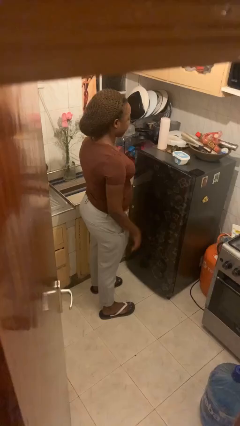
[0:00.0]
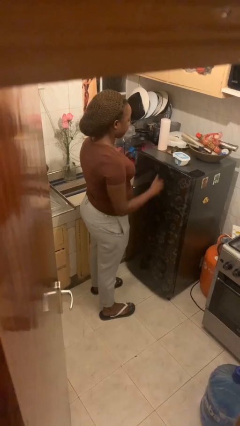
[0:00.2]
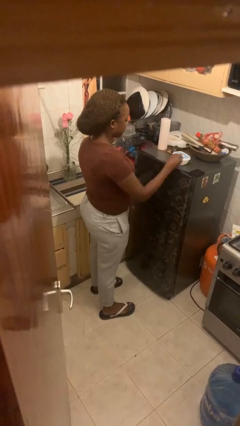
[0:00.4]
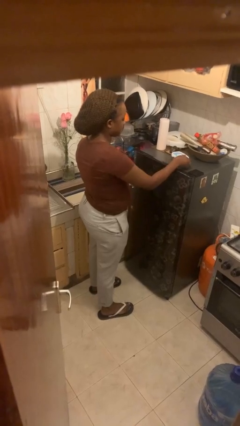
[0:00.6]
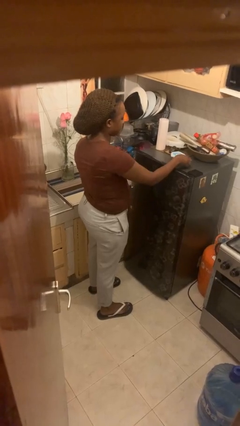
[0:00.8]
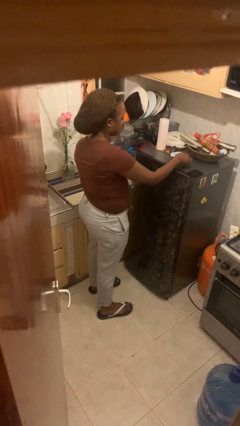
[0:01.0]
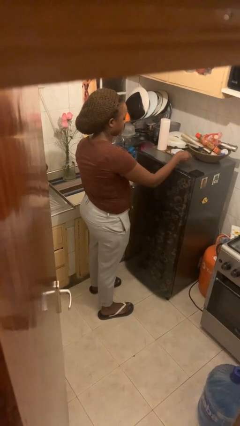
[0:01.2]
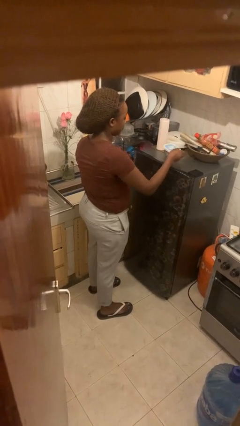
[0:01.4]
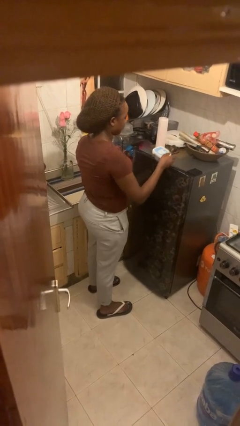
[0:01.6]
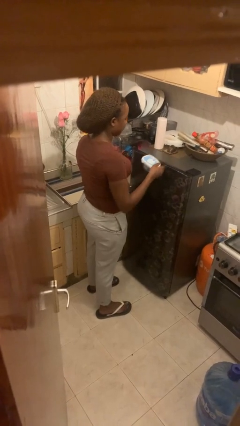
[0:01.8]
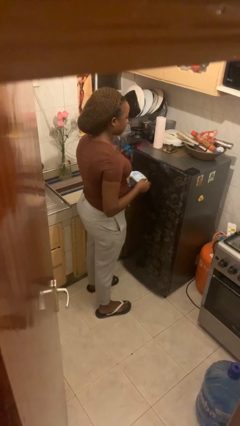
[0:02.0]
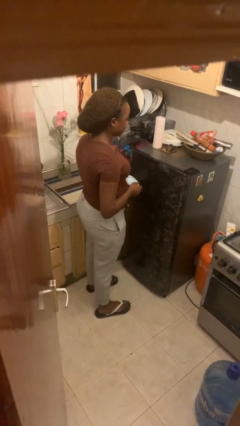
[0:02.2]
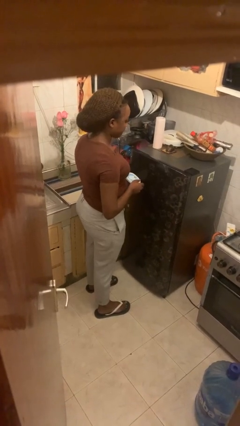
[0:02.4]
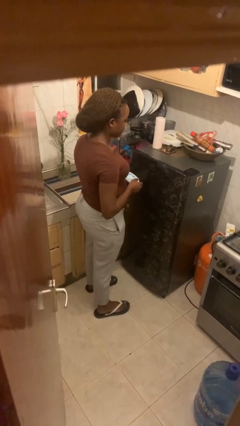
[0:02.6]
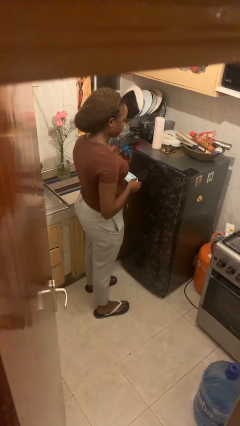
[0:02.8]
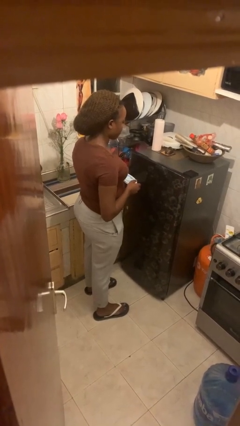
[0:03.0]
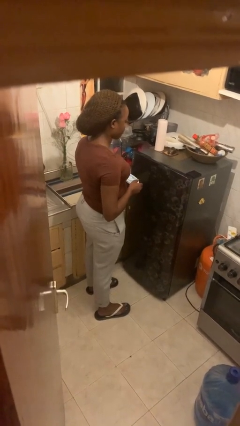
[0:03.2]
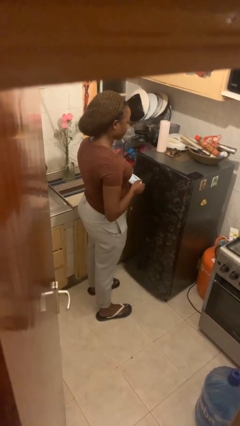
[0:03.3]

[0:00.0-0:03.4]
person picks up object from countertop

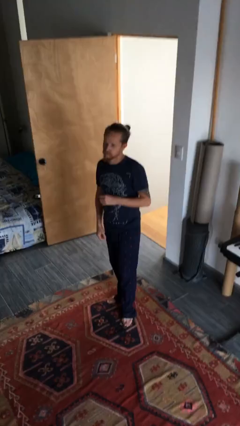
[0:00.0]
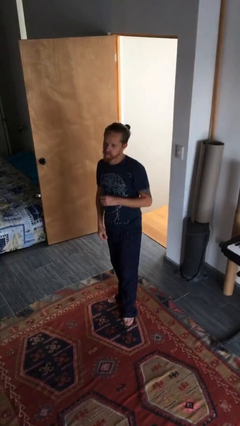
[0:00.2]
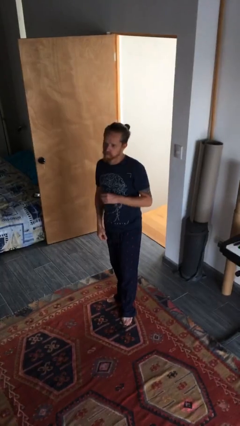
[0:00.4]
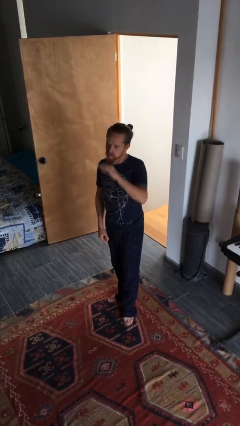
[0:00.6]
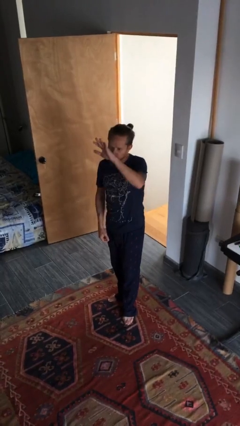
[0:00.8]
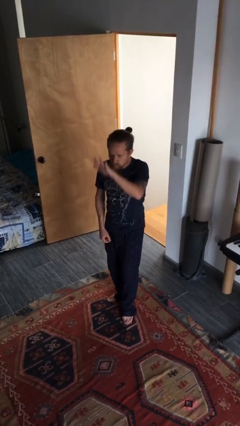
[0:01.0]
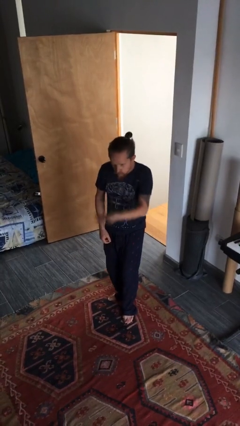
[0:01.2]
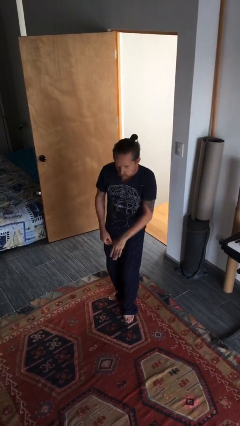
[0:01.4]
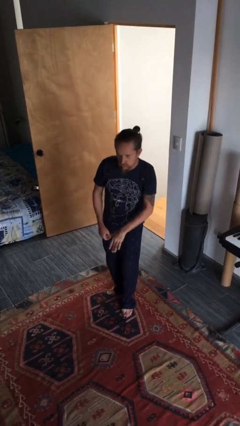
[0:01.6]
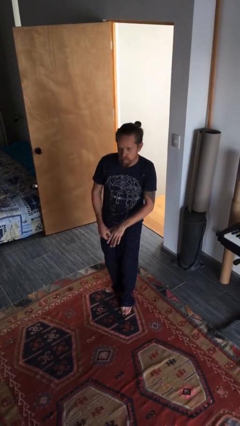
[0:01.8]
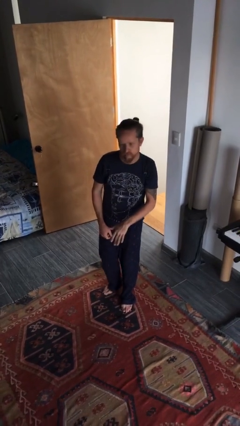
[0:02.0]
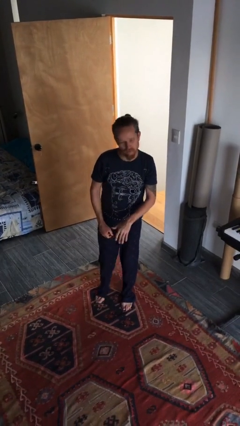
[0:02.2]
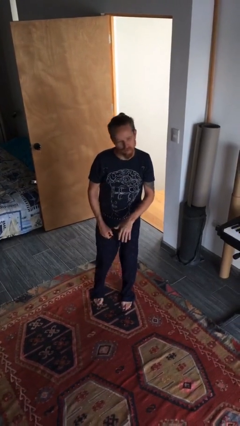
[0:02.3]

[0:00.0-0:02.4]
person gestures swipe down

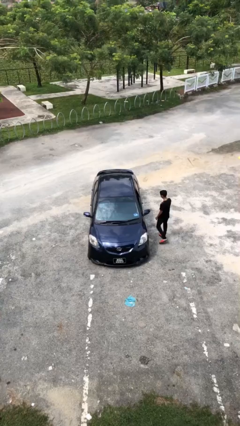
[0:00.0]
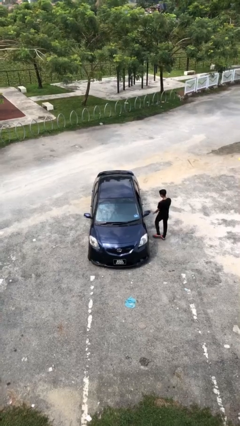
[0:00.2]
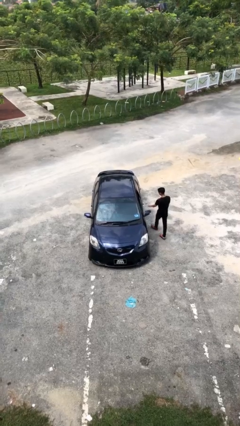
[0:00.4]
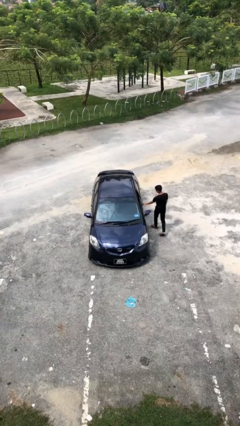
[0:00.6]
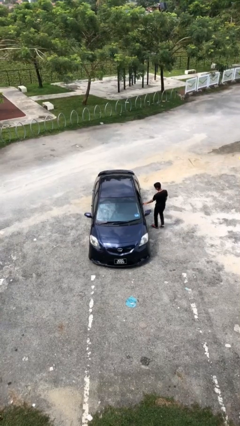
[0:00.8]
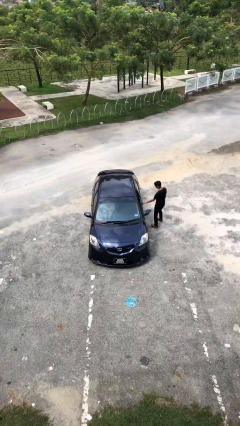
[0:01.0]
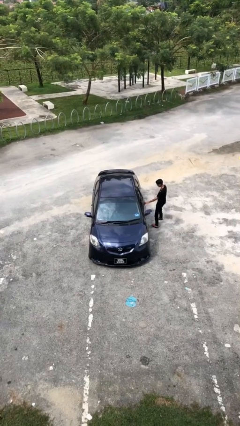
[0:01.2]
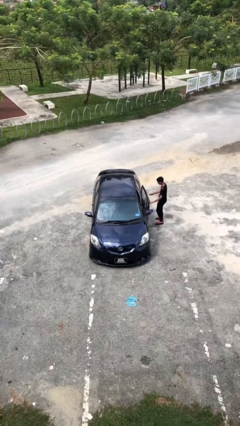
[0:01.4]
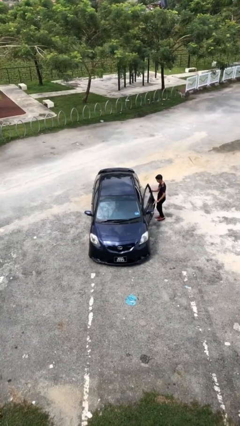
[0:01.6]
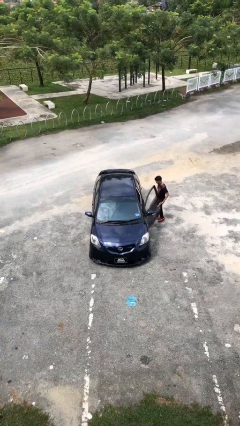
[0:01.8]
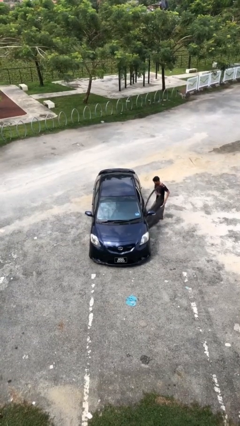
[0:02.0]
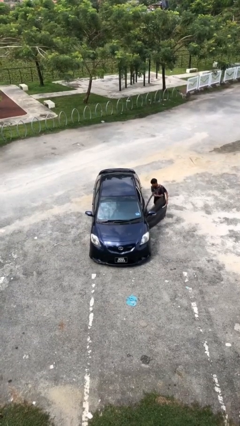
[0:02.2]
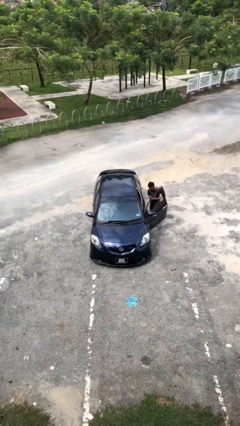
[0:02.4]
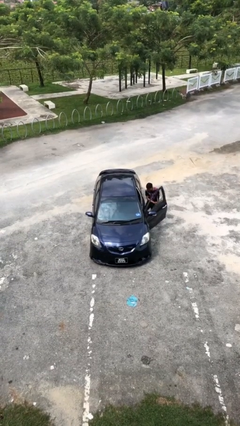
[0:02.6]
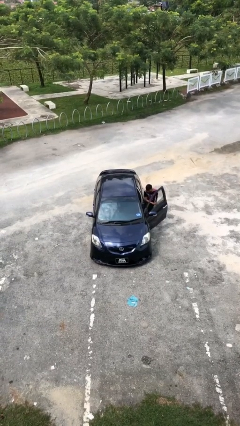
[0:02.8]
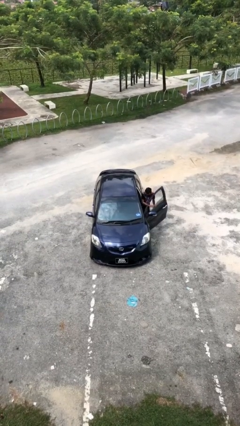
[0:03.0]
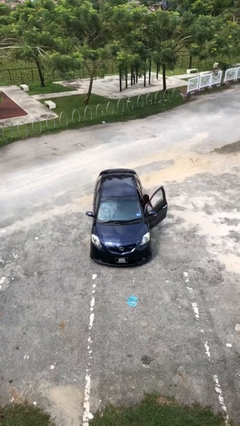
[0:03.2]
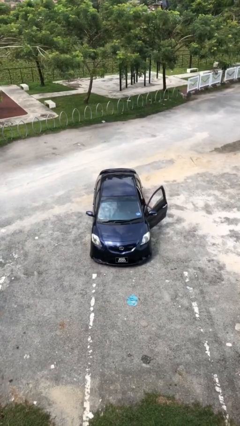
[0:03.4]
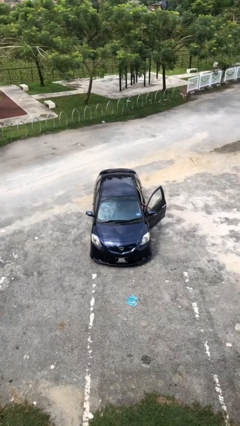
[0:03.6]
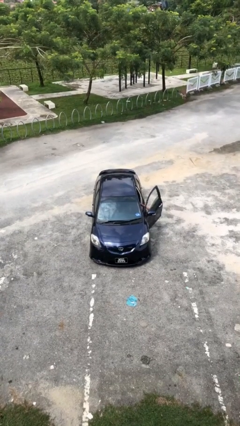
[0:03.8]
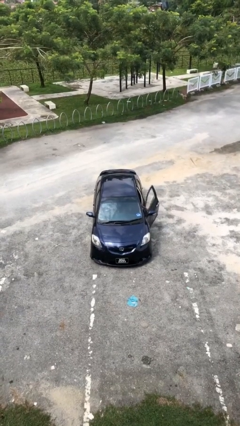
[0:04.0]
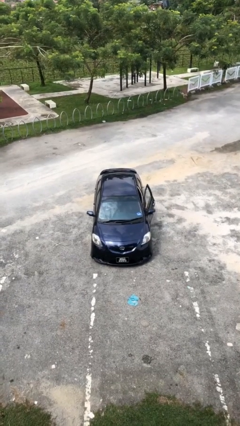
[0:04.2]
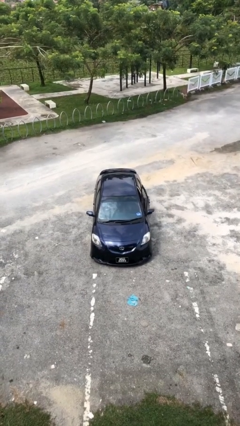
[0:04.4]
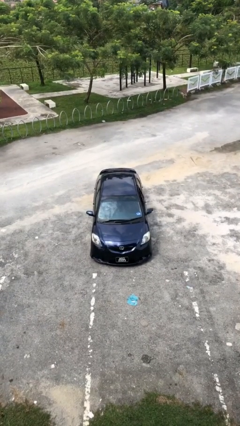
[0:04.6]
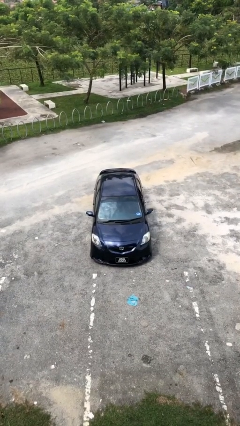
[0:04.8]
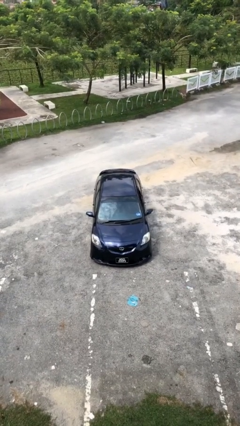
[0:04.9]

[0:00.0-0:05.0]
car picks up person

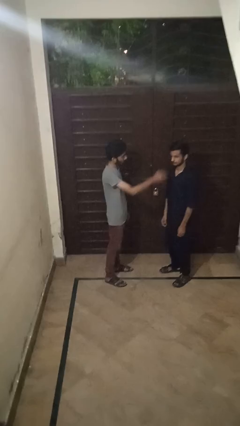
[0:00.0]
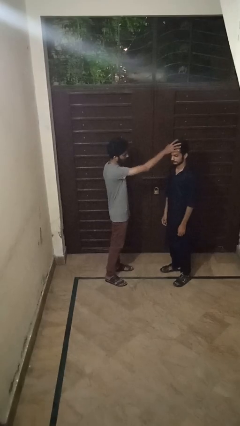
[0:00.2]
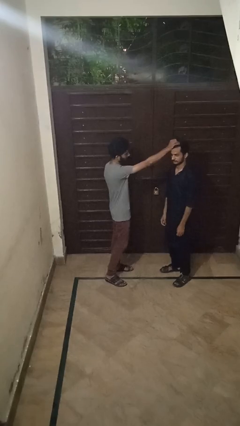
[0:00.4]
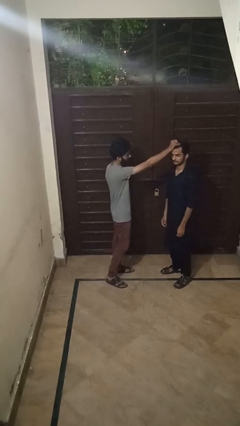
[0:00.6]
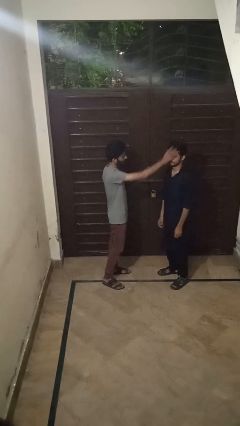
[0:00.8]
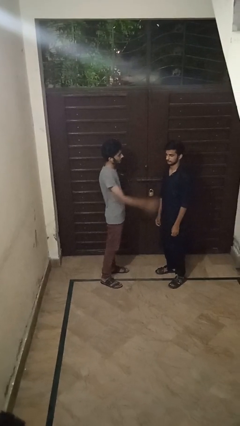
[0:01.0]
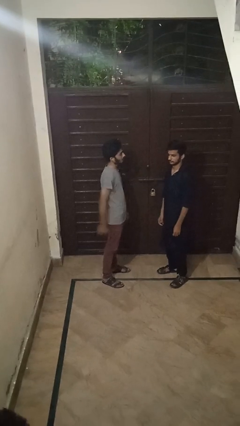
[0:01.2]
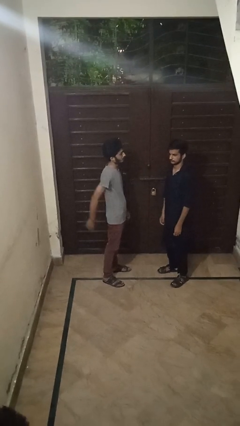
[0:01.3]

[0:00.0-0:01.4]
person grabs person by hair

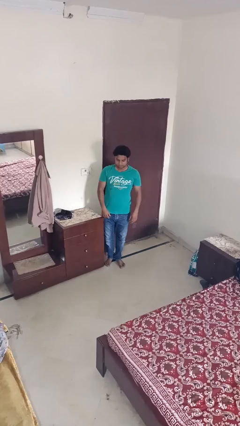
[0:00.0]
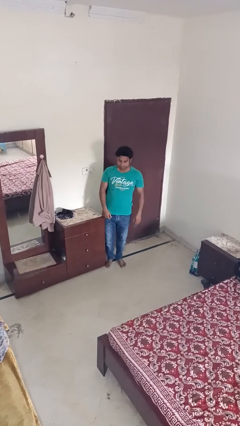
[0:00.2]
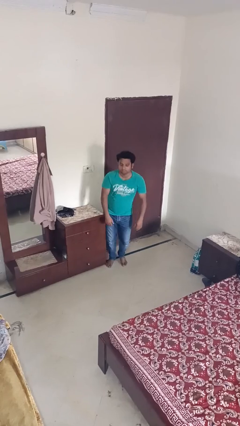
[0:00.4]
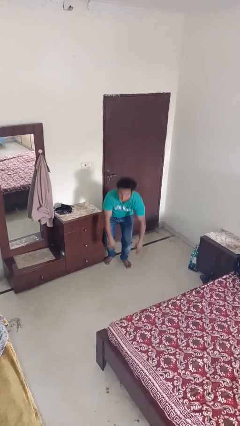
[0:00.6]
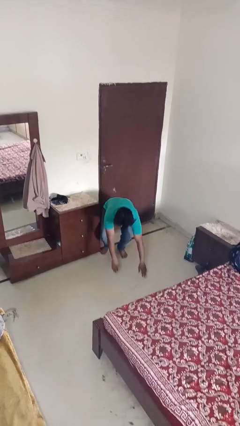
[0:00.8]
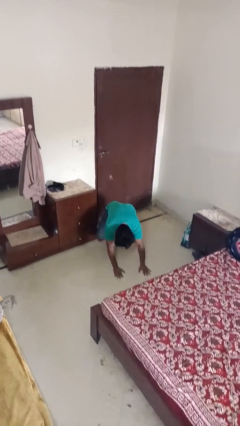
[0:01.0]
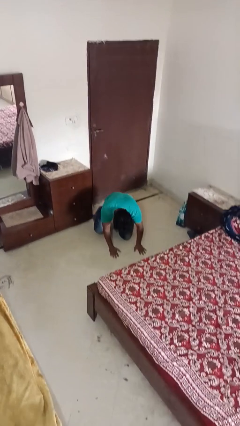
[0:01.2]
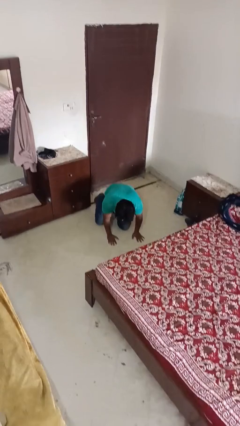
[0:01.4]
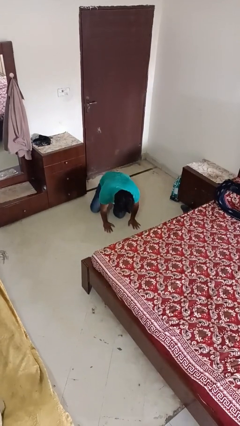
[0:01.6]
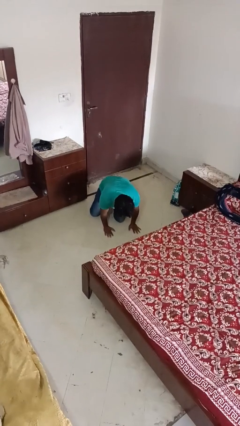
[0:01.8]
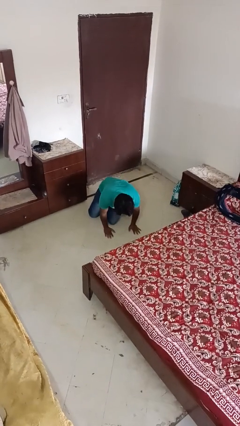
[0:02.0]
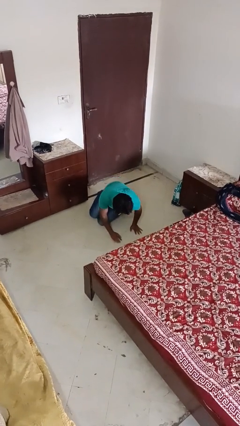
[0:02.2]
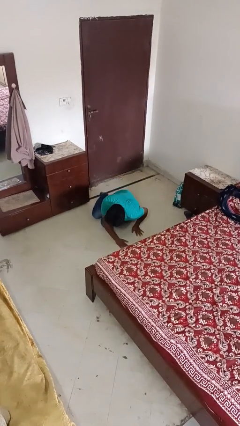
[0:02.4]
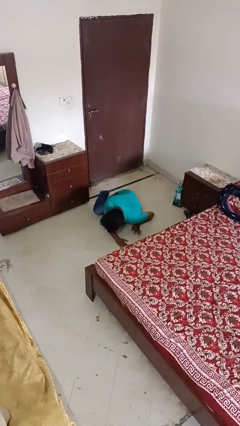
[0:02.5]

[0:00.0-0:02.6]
person trips on object on floor

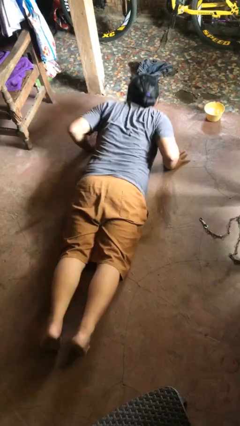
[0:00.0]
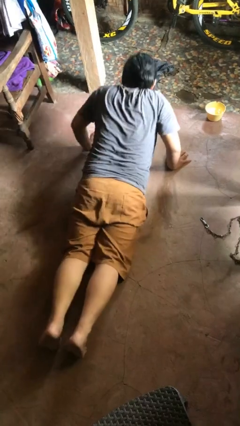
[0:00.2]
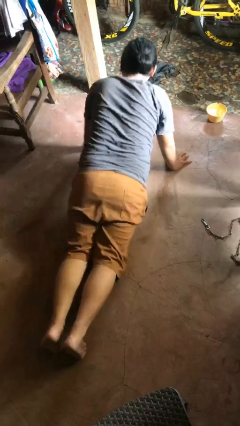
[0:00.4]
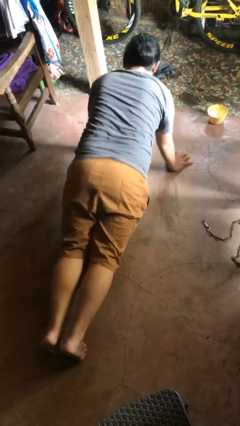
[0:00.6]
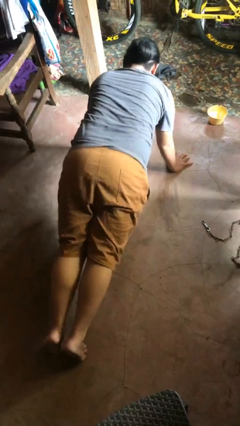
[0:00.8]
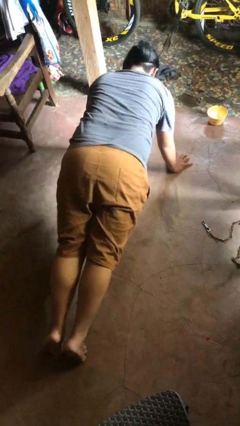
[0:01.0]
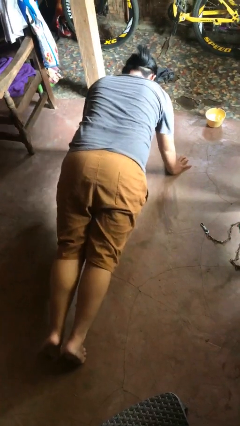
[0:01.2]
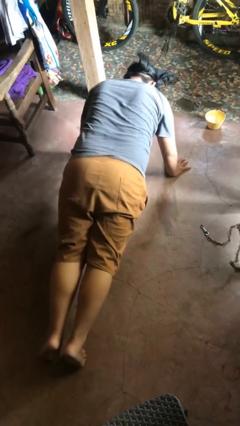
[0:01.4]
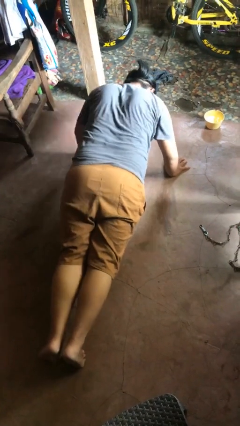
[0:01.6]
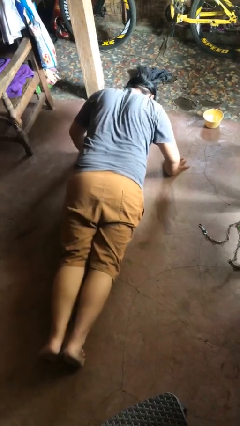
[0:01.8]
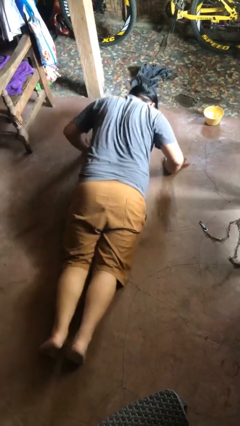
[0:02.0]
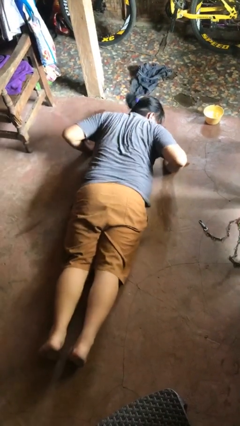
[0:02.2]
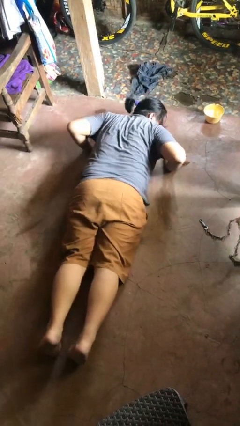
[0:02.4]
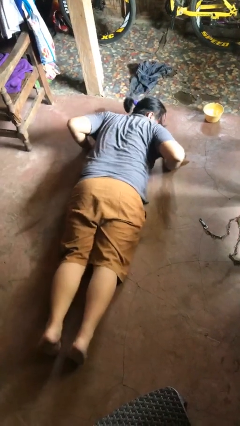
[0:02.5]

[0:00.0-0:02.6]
person exercises with pushup
